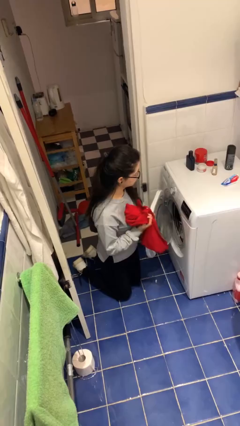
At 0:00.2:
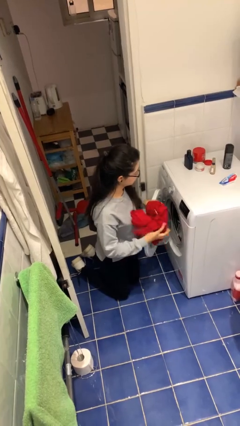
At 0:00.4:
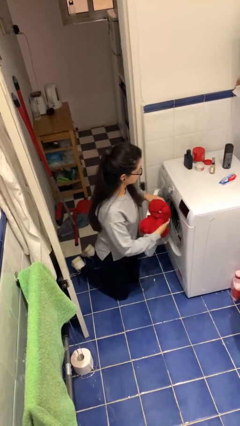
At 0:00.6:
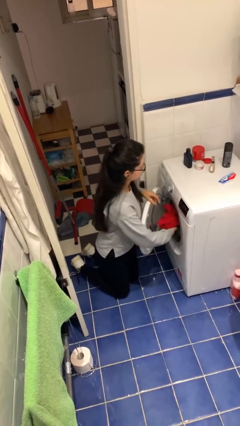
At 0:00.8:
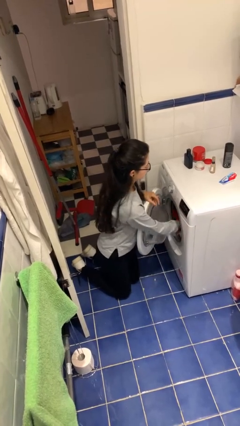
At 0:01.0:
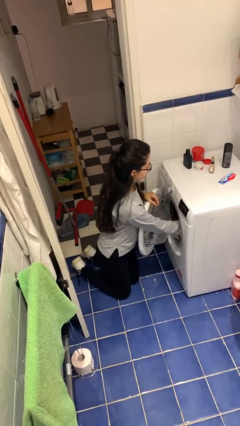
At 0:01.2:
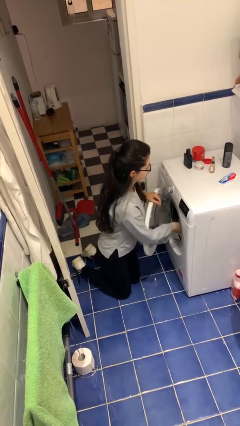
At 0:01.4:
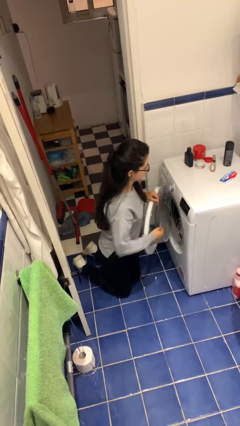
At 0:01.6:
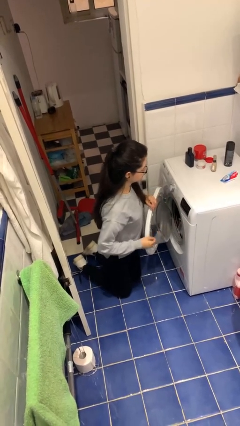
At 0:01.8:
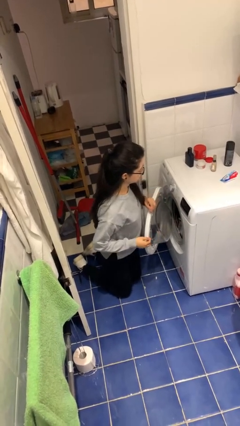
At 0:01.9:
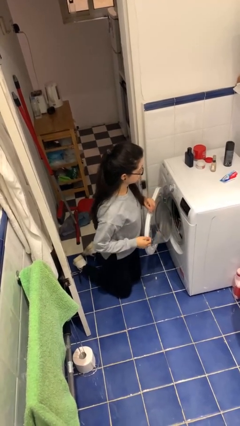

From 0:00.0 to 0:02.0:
person loads dryer

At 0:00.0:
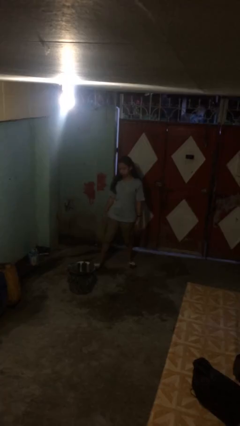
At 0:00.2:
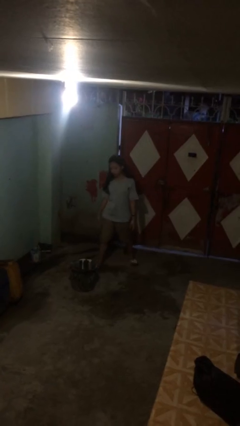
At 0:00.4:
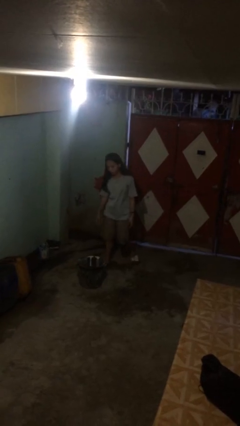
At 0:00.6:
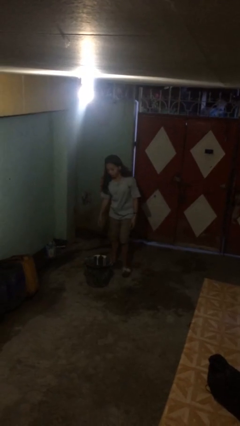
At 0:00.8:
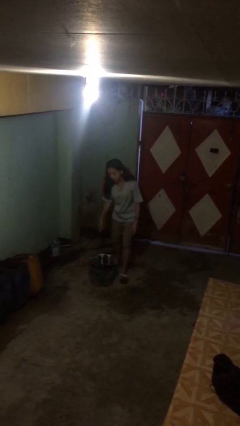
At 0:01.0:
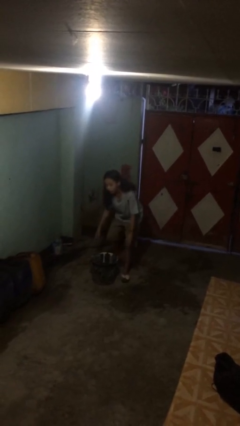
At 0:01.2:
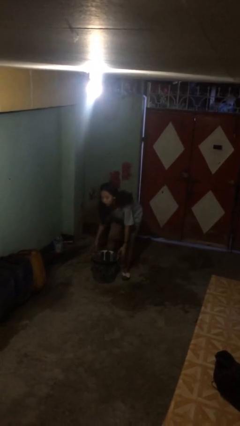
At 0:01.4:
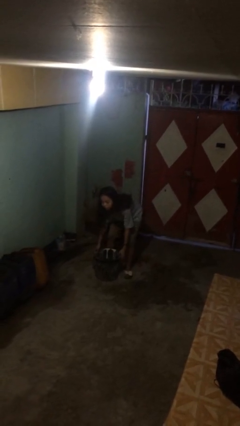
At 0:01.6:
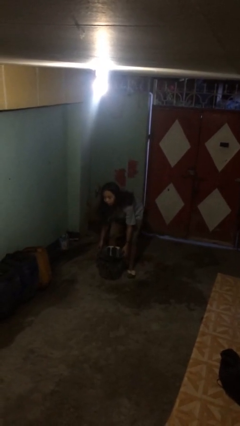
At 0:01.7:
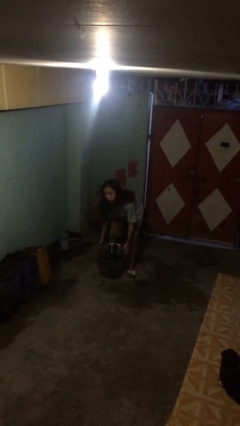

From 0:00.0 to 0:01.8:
person picks up object from floor

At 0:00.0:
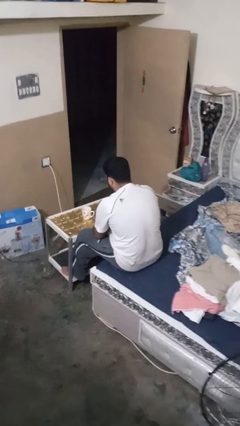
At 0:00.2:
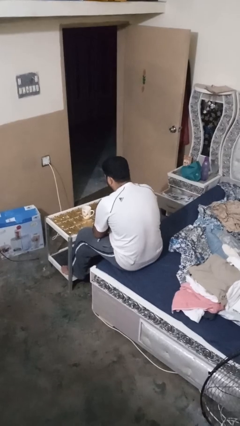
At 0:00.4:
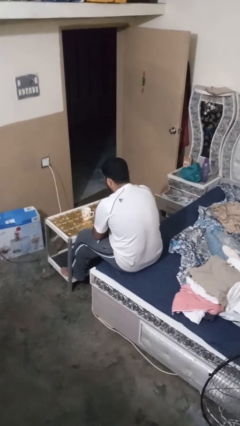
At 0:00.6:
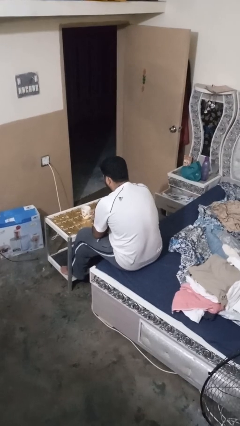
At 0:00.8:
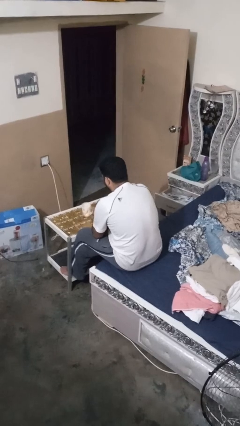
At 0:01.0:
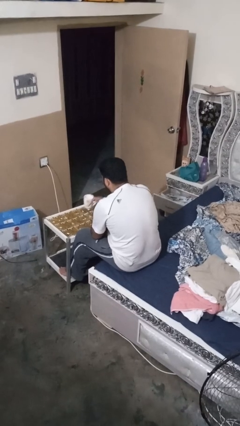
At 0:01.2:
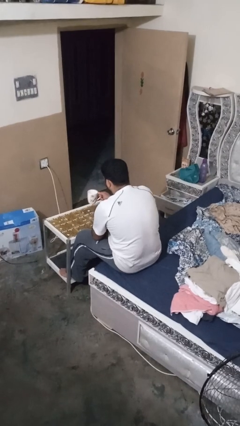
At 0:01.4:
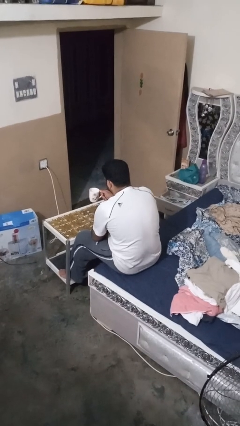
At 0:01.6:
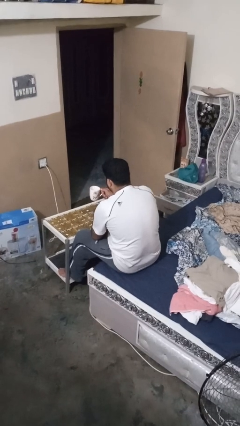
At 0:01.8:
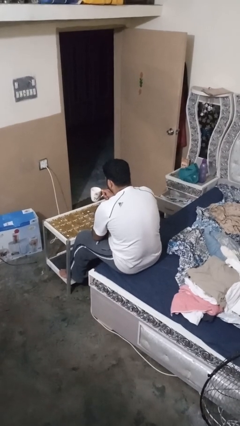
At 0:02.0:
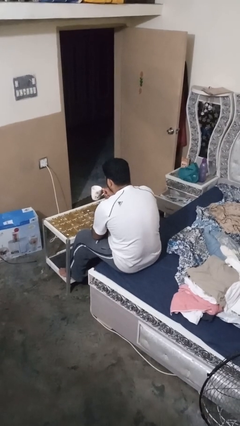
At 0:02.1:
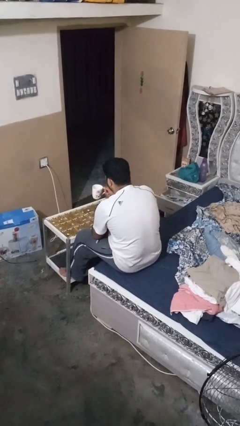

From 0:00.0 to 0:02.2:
person picks up object from table

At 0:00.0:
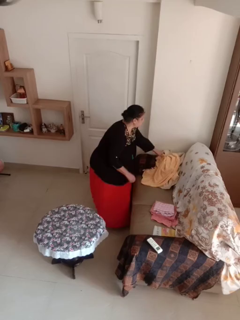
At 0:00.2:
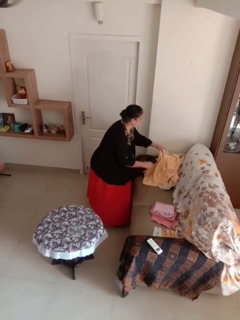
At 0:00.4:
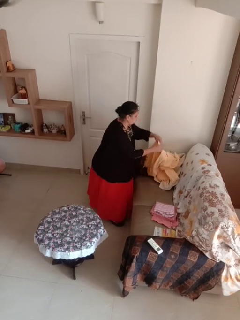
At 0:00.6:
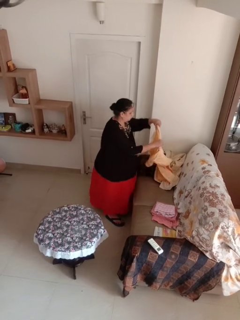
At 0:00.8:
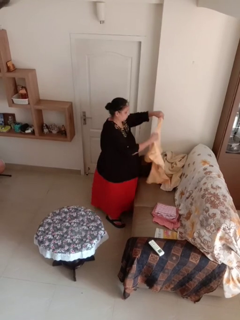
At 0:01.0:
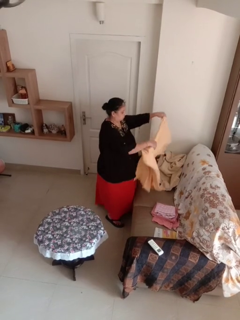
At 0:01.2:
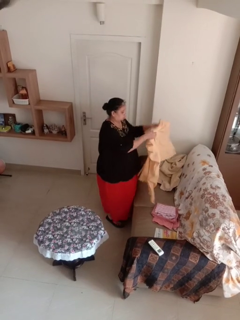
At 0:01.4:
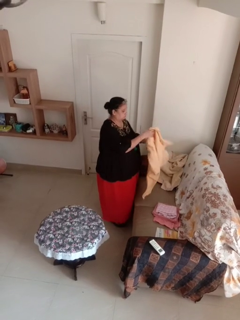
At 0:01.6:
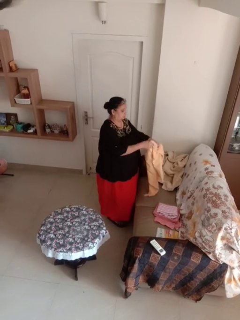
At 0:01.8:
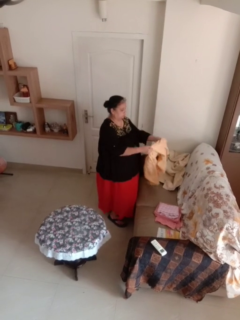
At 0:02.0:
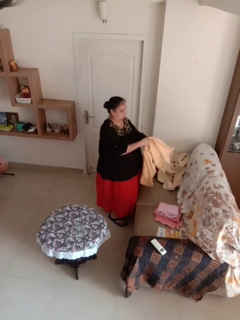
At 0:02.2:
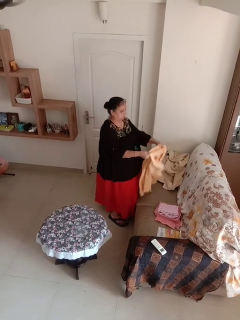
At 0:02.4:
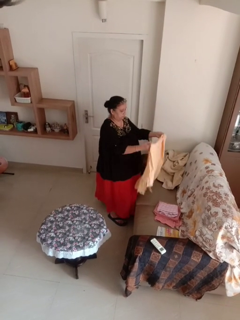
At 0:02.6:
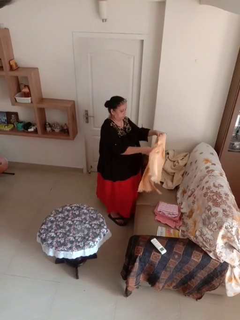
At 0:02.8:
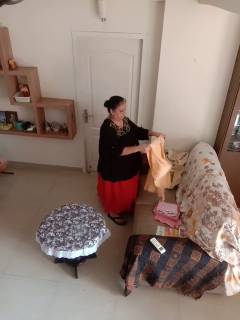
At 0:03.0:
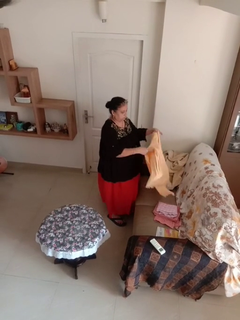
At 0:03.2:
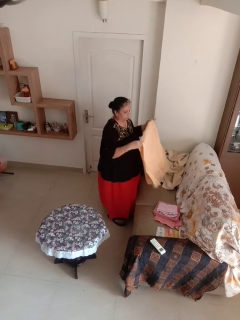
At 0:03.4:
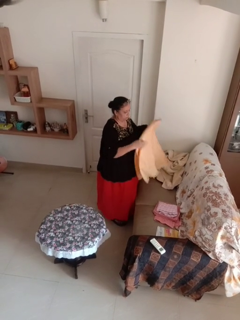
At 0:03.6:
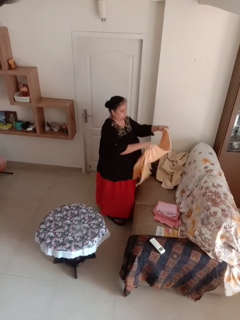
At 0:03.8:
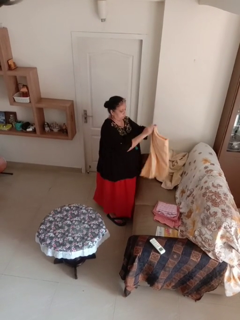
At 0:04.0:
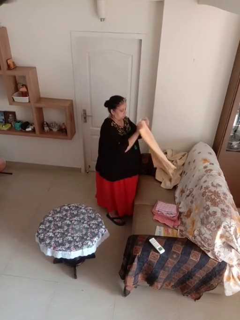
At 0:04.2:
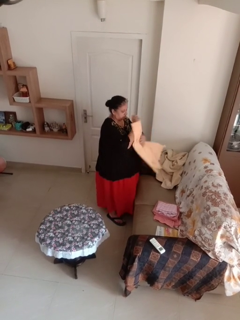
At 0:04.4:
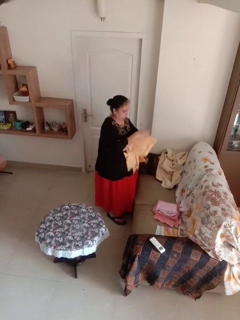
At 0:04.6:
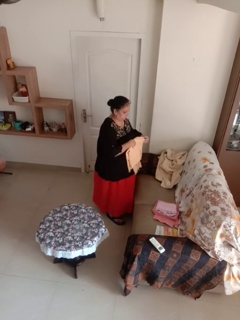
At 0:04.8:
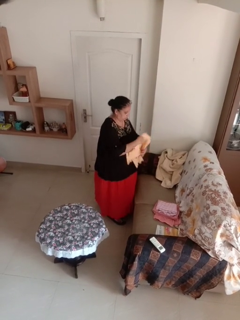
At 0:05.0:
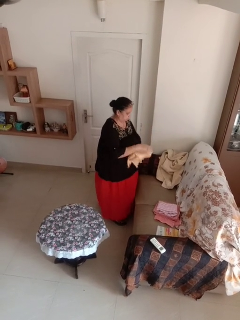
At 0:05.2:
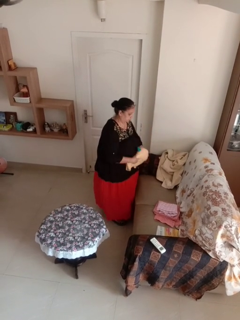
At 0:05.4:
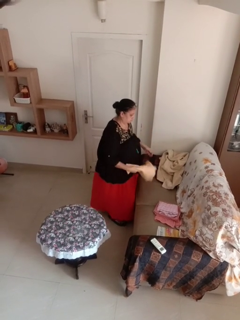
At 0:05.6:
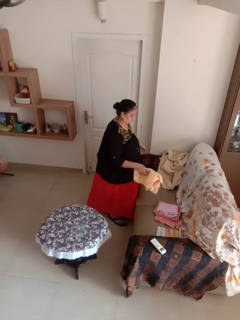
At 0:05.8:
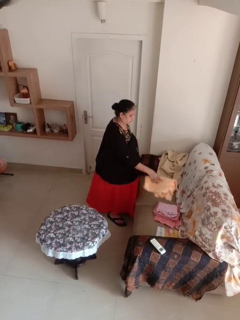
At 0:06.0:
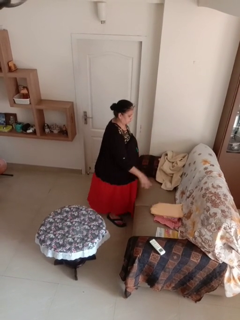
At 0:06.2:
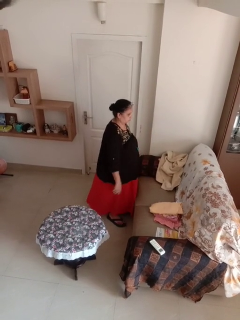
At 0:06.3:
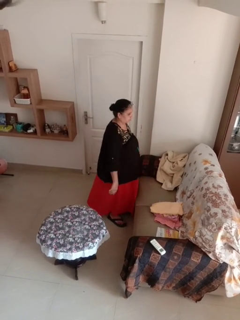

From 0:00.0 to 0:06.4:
person folds towel

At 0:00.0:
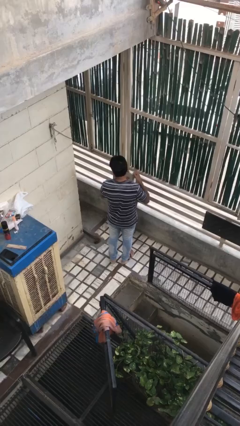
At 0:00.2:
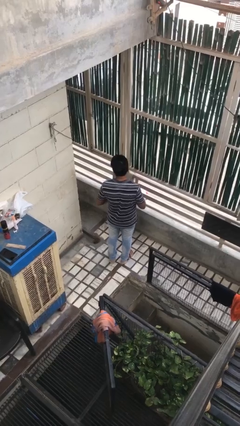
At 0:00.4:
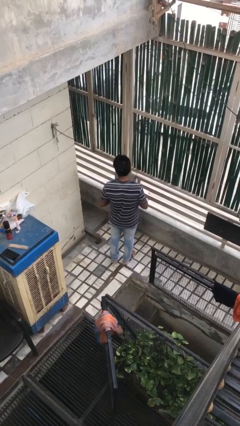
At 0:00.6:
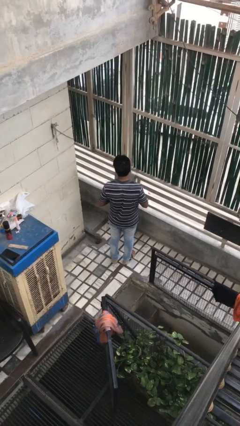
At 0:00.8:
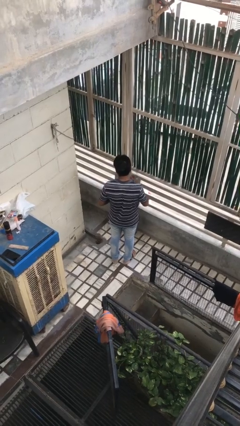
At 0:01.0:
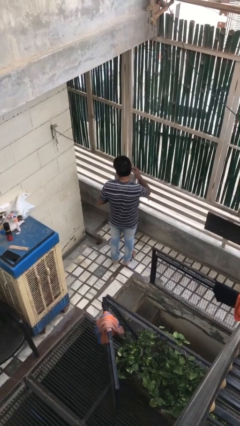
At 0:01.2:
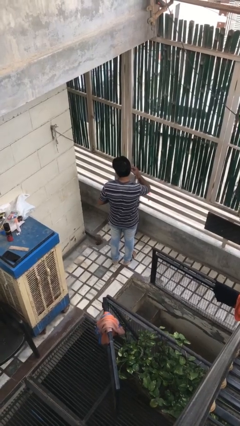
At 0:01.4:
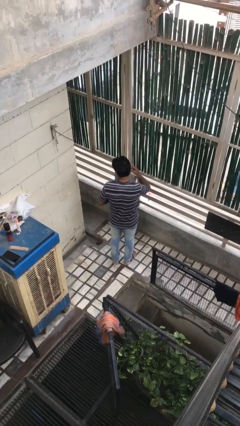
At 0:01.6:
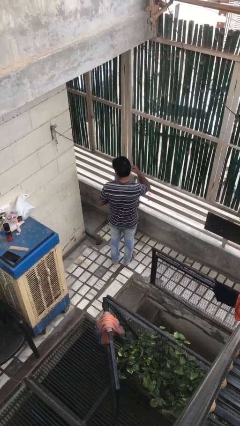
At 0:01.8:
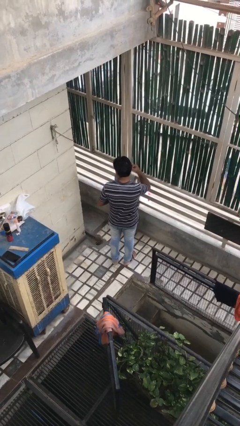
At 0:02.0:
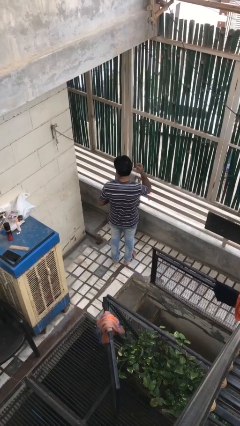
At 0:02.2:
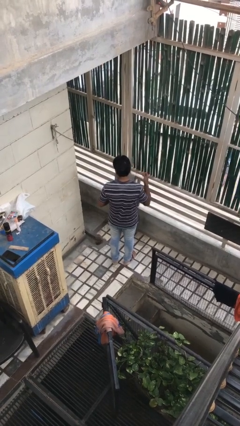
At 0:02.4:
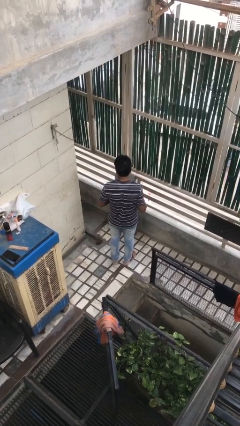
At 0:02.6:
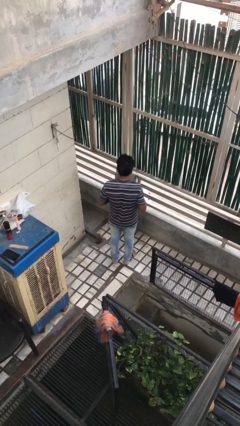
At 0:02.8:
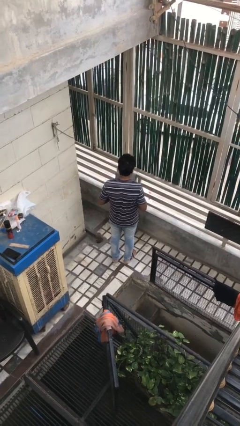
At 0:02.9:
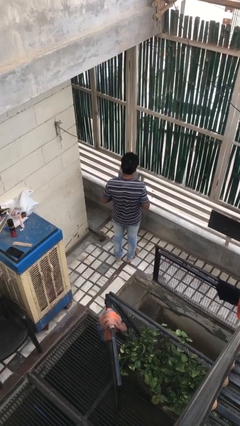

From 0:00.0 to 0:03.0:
person takes off earrings

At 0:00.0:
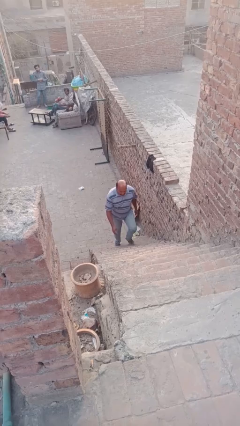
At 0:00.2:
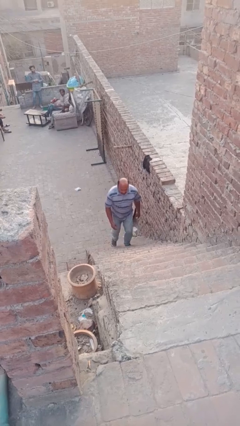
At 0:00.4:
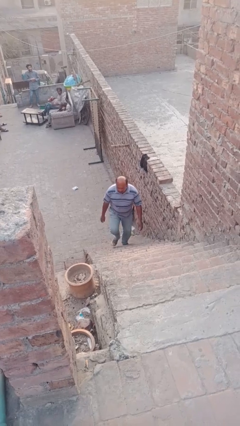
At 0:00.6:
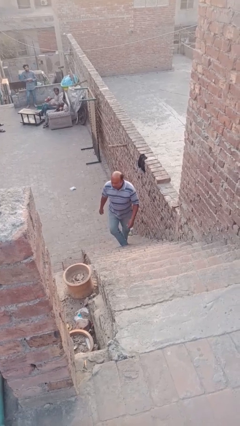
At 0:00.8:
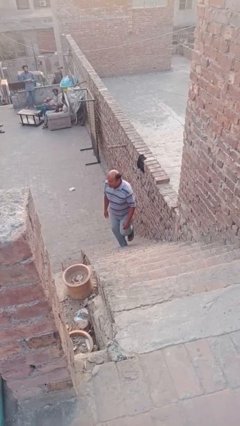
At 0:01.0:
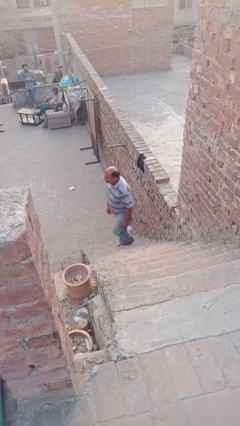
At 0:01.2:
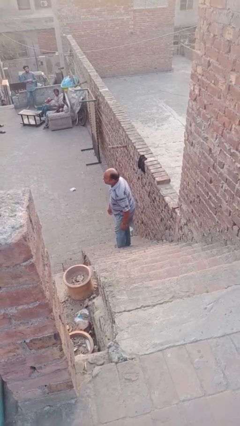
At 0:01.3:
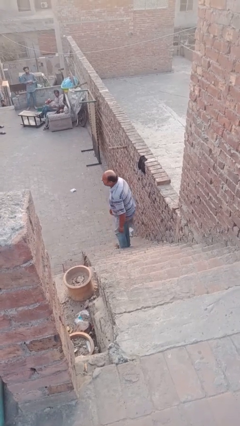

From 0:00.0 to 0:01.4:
person climbs up stairs

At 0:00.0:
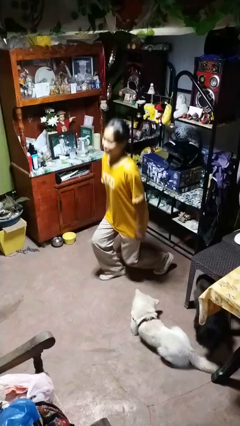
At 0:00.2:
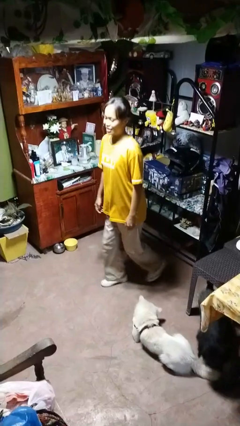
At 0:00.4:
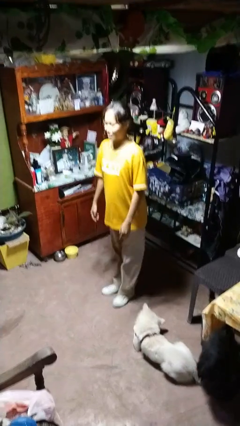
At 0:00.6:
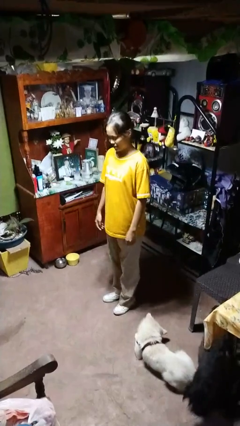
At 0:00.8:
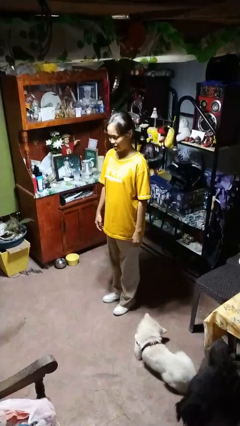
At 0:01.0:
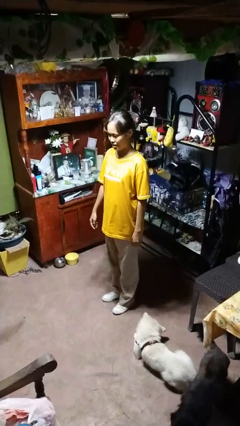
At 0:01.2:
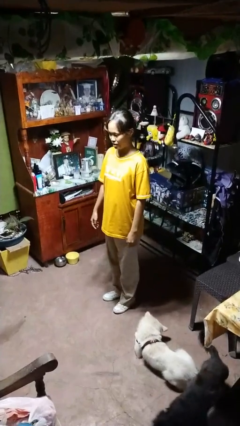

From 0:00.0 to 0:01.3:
person stands up from floor

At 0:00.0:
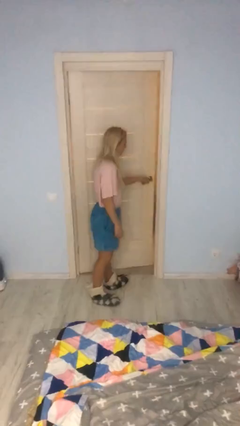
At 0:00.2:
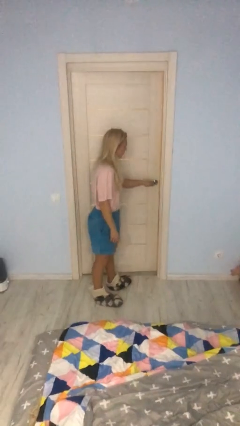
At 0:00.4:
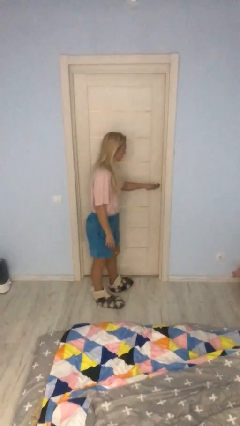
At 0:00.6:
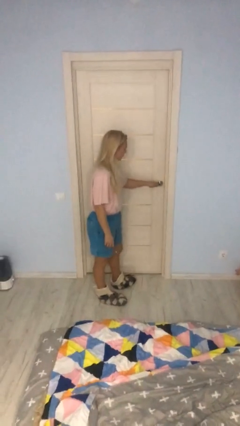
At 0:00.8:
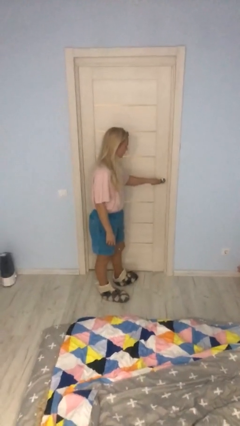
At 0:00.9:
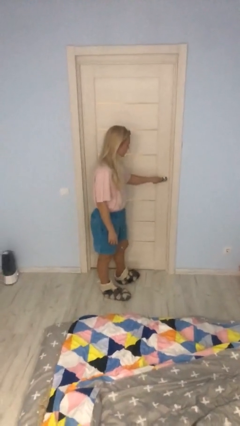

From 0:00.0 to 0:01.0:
person closes facility door
